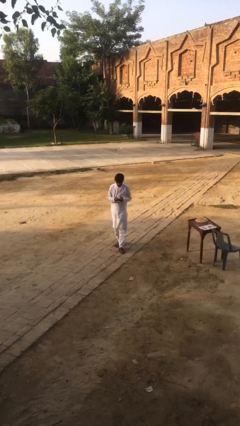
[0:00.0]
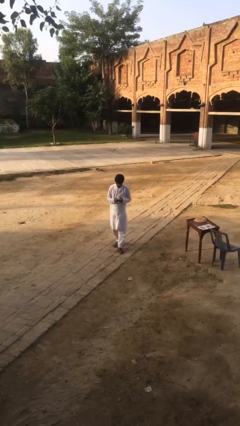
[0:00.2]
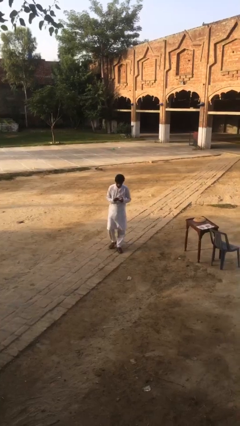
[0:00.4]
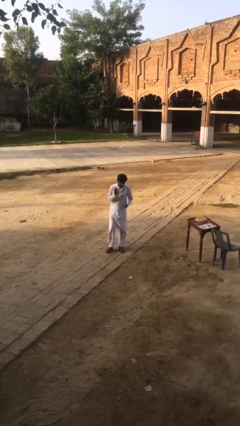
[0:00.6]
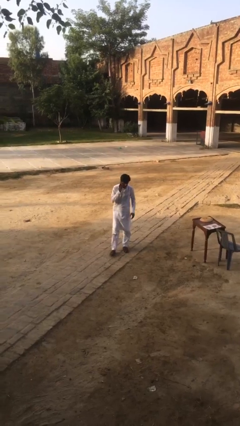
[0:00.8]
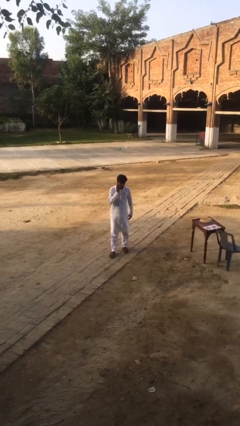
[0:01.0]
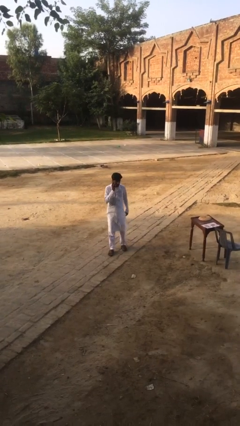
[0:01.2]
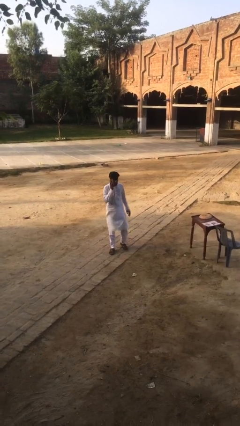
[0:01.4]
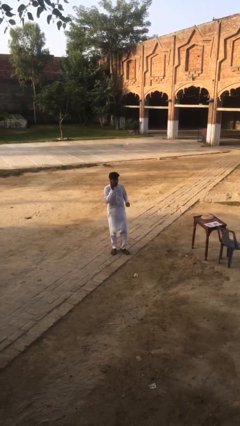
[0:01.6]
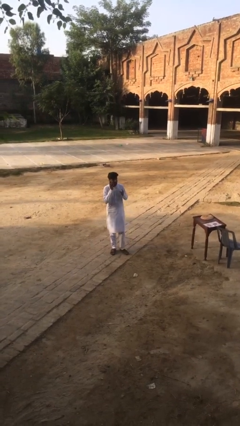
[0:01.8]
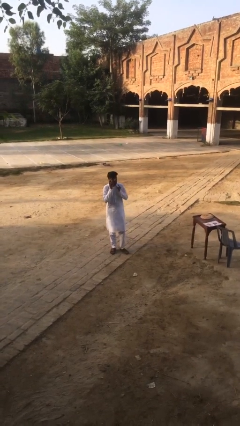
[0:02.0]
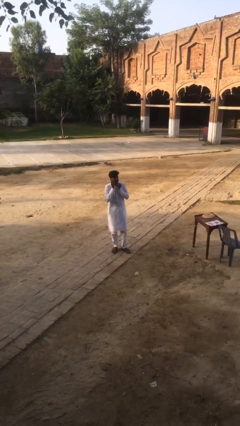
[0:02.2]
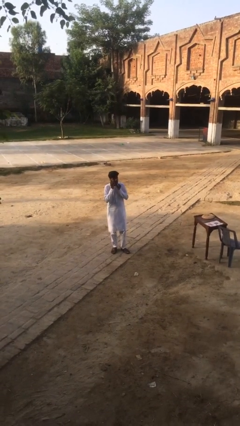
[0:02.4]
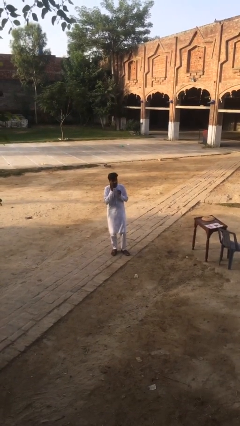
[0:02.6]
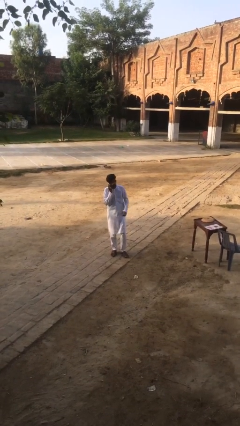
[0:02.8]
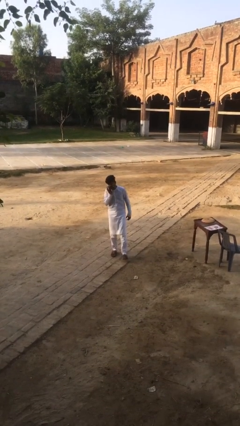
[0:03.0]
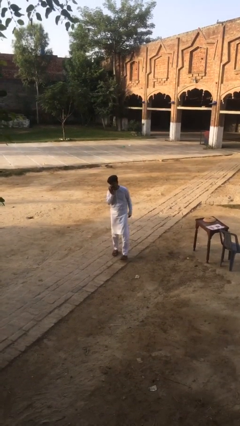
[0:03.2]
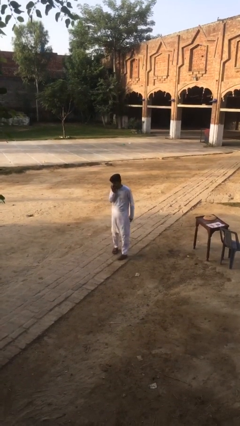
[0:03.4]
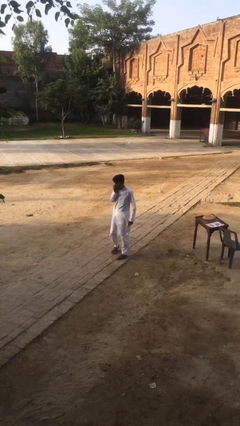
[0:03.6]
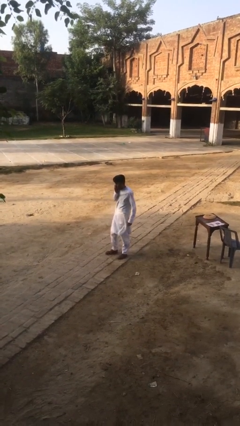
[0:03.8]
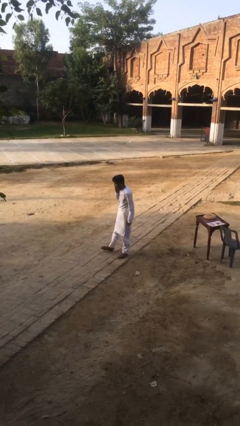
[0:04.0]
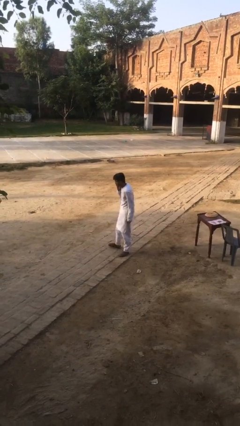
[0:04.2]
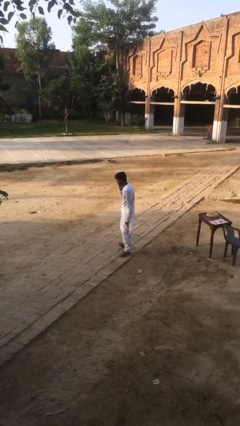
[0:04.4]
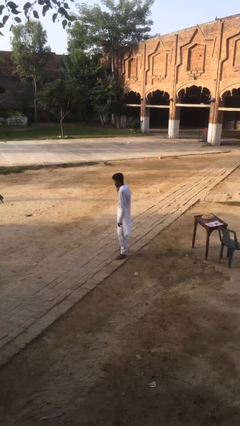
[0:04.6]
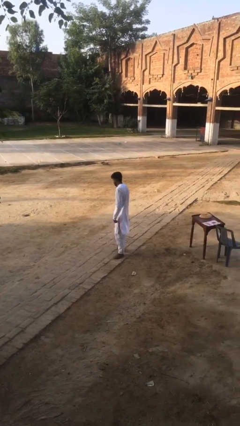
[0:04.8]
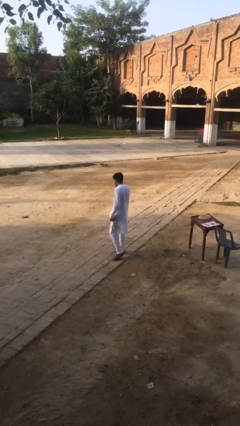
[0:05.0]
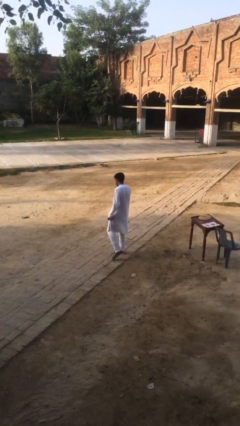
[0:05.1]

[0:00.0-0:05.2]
person talks on phone

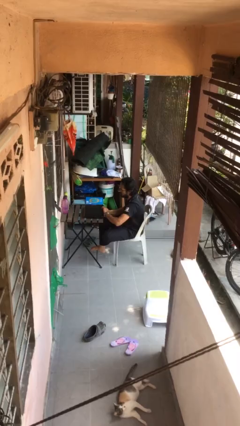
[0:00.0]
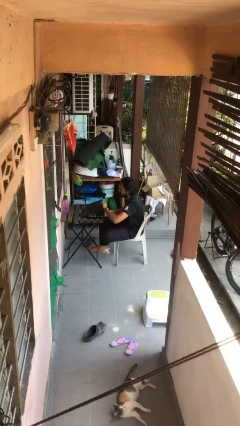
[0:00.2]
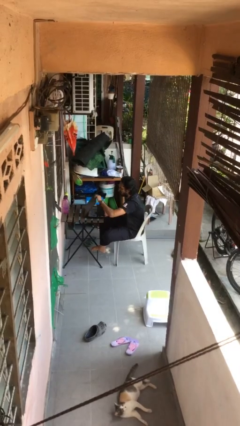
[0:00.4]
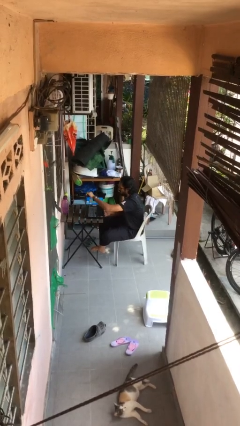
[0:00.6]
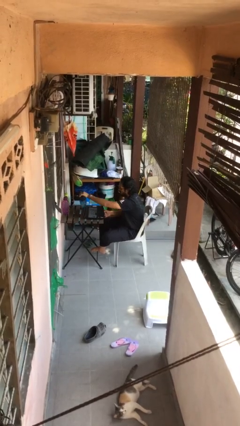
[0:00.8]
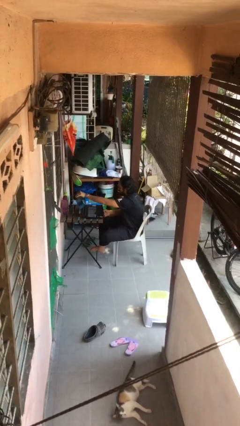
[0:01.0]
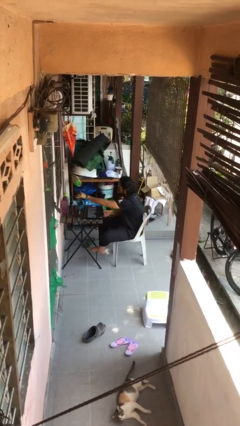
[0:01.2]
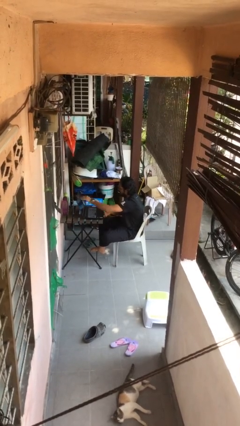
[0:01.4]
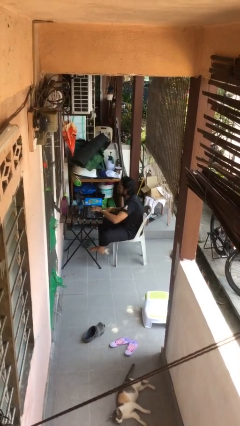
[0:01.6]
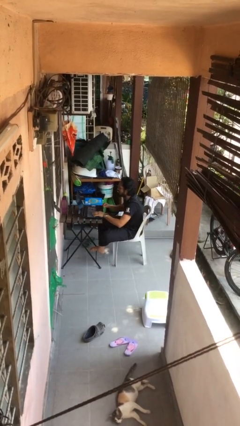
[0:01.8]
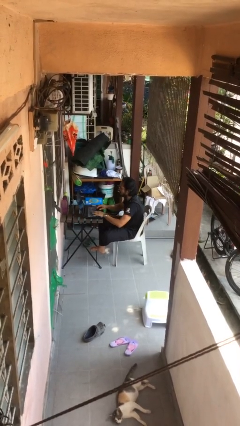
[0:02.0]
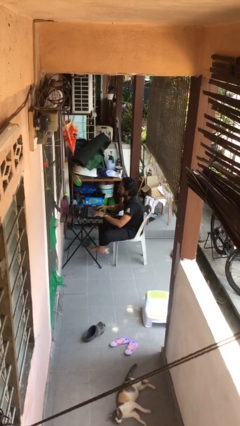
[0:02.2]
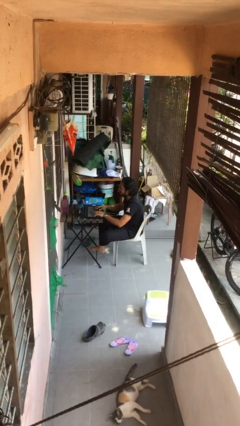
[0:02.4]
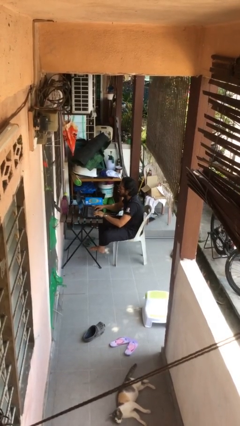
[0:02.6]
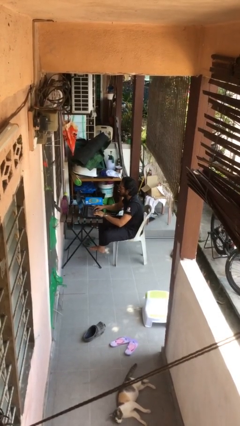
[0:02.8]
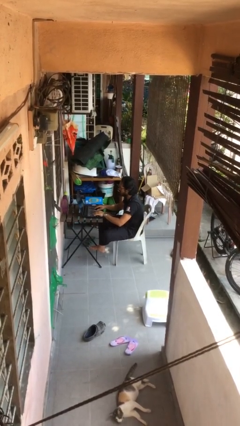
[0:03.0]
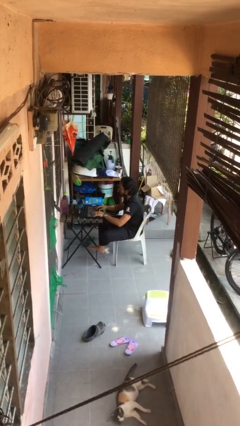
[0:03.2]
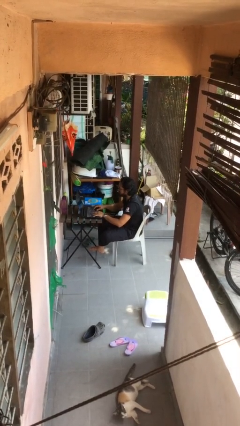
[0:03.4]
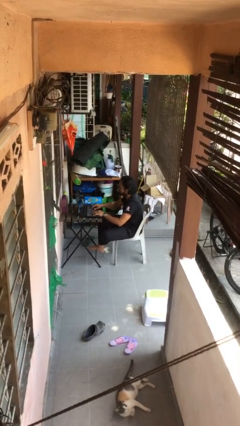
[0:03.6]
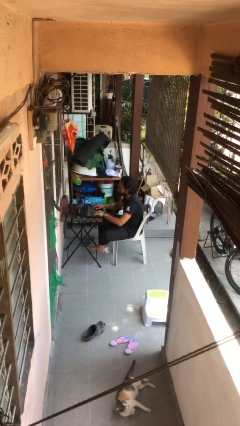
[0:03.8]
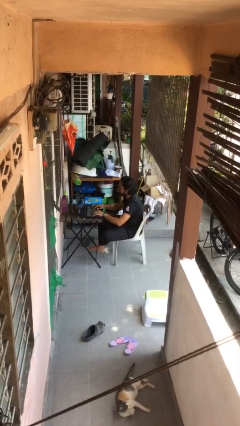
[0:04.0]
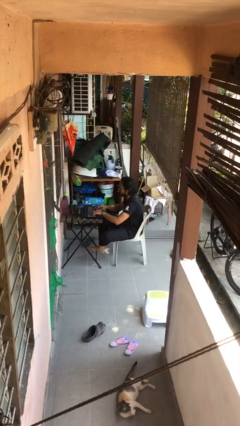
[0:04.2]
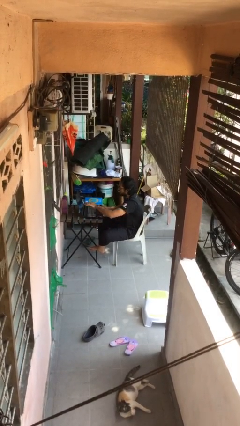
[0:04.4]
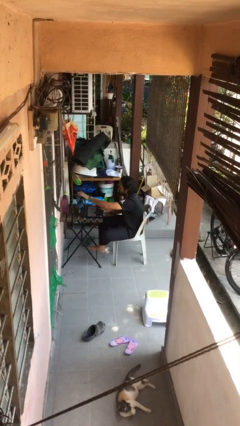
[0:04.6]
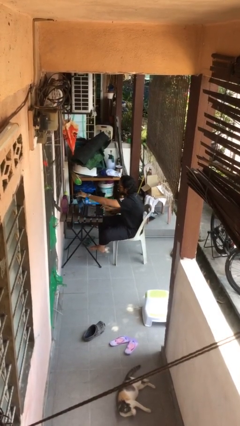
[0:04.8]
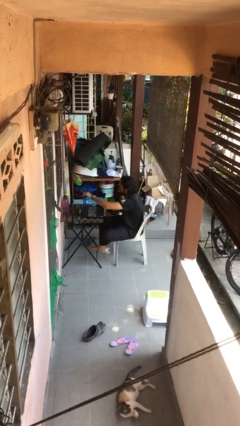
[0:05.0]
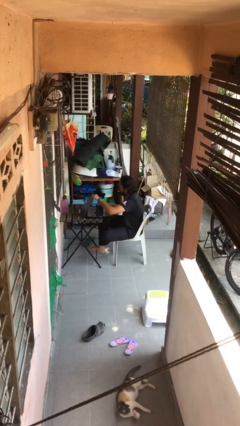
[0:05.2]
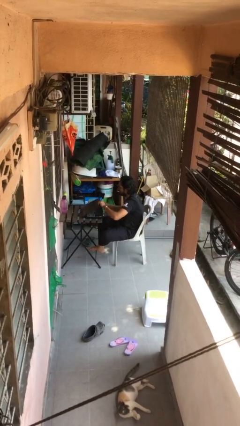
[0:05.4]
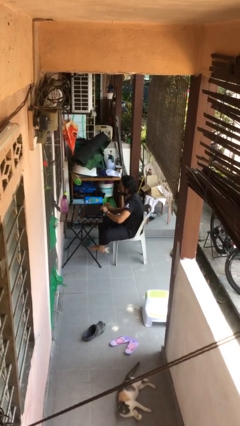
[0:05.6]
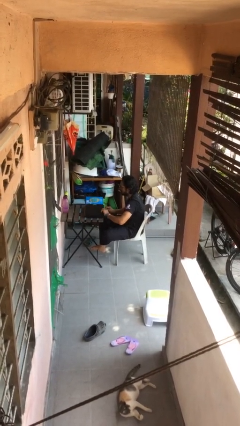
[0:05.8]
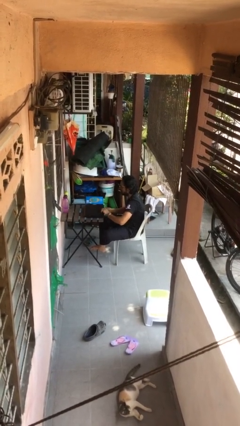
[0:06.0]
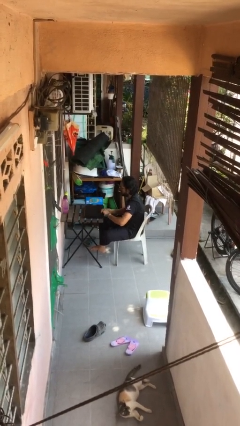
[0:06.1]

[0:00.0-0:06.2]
person interacts with laptop

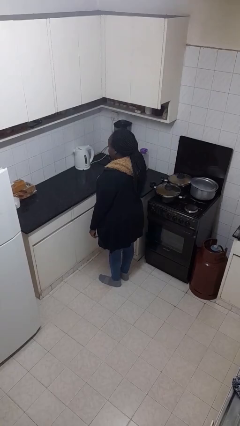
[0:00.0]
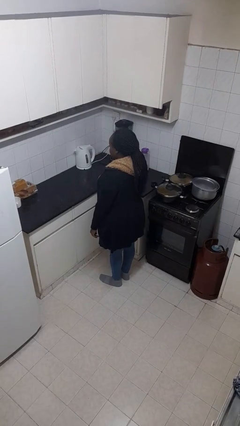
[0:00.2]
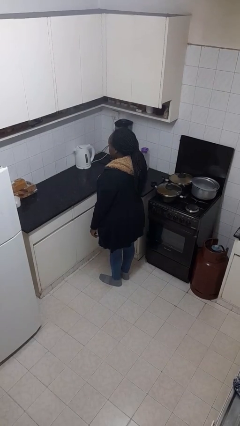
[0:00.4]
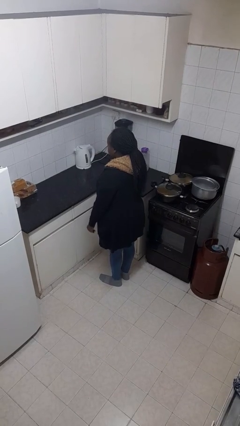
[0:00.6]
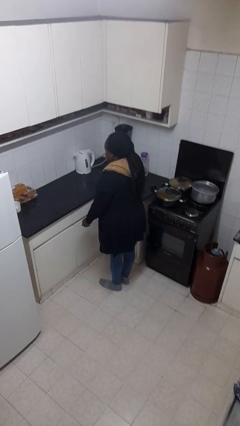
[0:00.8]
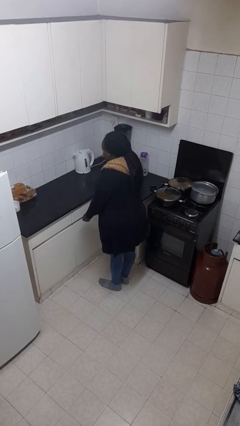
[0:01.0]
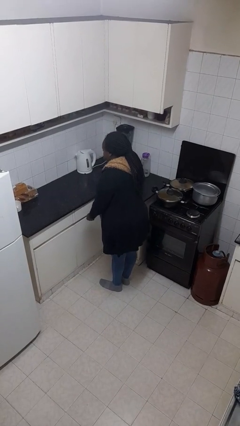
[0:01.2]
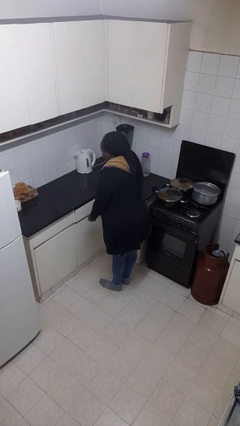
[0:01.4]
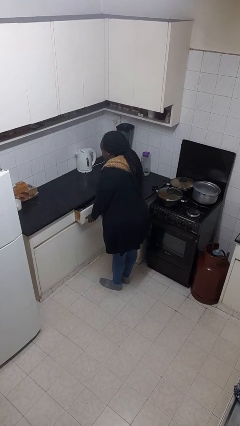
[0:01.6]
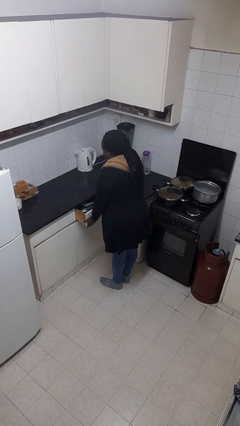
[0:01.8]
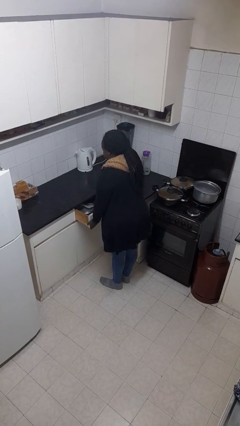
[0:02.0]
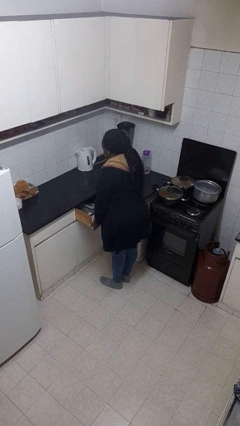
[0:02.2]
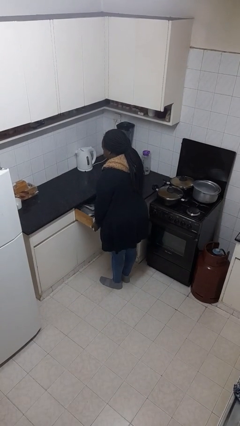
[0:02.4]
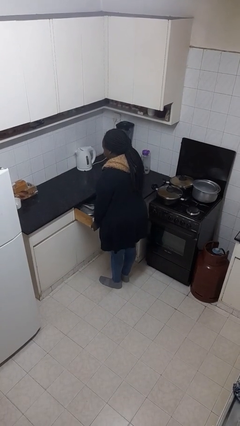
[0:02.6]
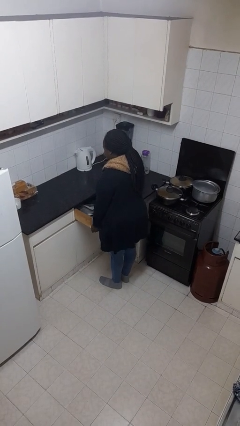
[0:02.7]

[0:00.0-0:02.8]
person opens kitchen drawer

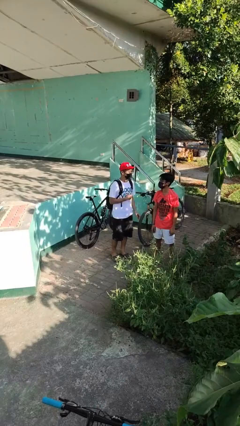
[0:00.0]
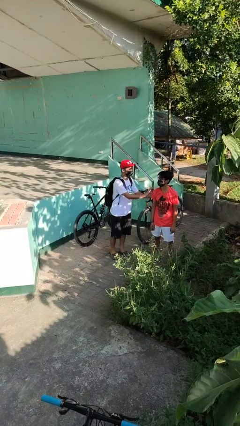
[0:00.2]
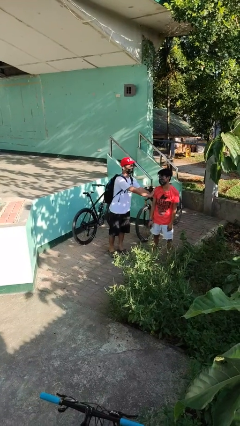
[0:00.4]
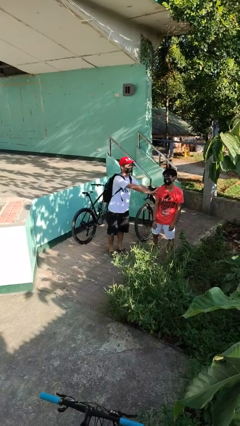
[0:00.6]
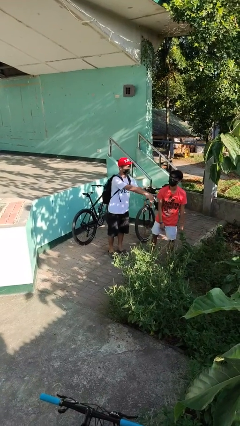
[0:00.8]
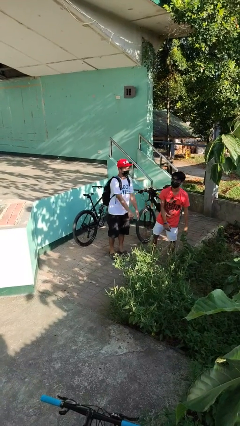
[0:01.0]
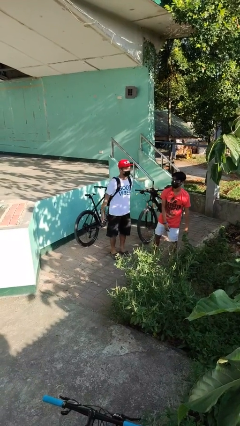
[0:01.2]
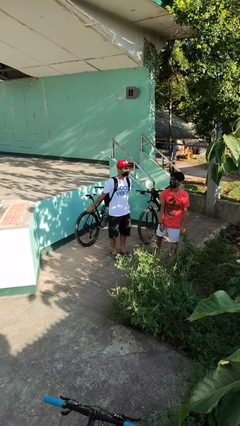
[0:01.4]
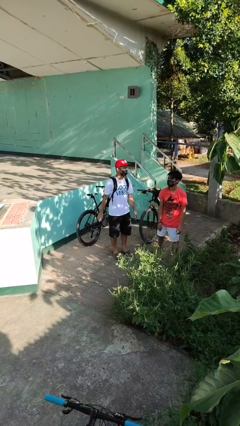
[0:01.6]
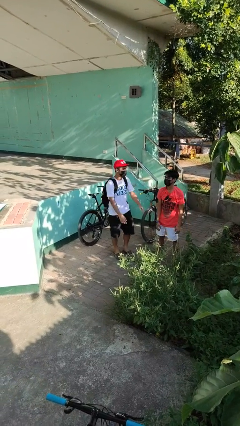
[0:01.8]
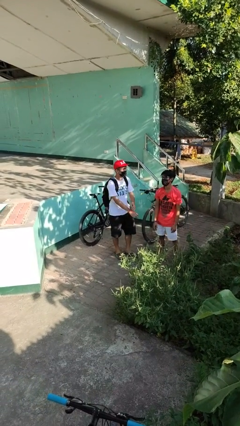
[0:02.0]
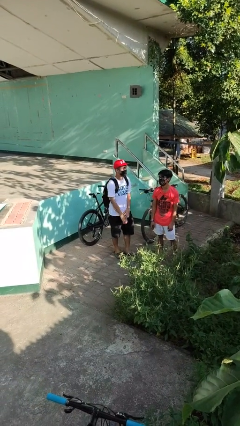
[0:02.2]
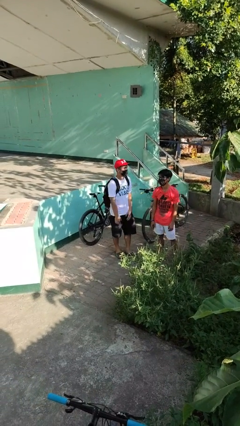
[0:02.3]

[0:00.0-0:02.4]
person shoves person

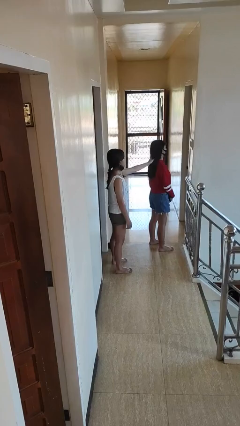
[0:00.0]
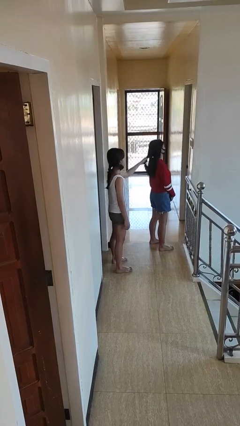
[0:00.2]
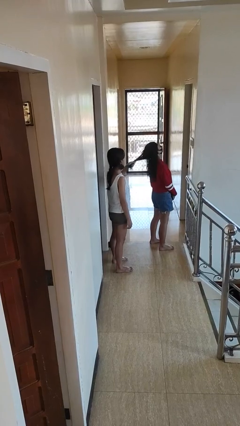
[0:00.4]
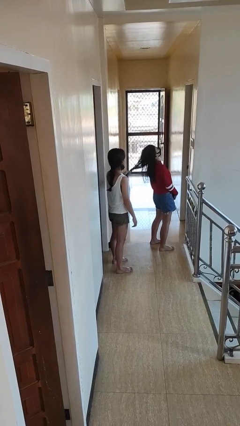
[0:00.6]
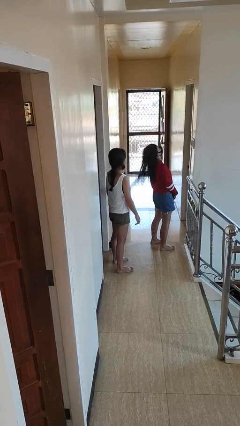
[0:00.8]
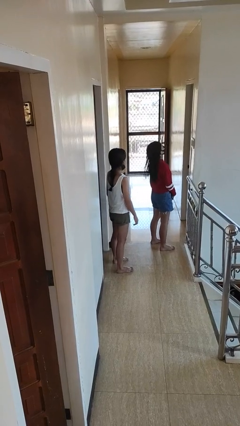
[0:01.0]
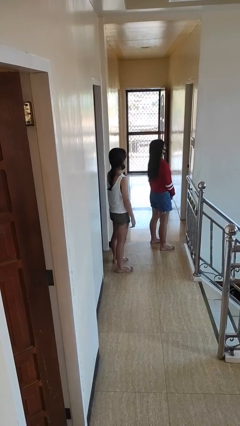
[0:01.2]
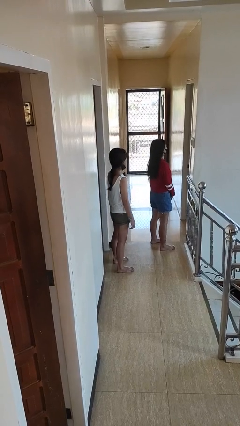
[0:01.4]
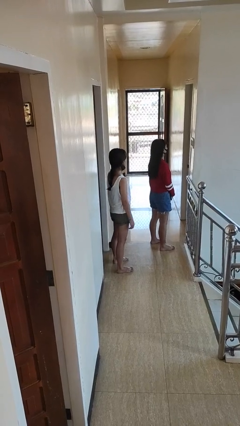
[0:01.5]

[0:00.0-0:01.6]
person grabs person by hair
